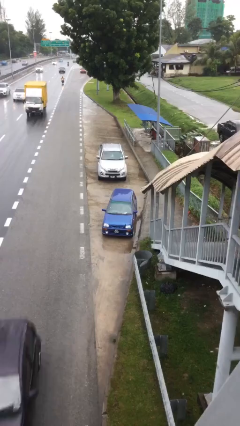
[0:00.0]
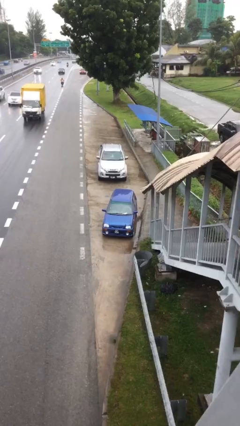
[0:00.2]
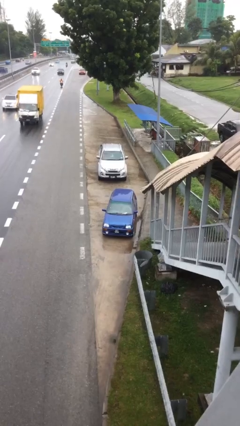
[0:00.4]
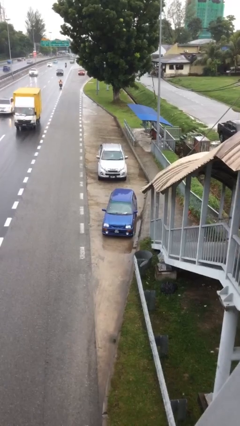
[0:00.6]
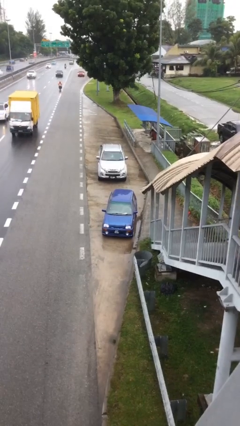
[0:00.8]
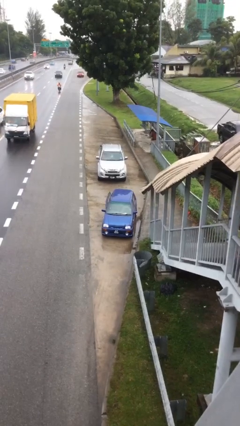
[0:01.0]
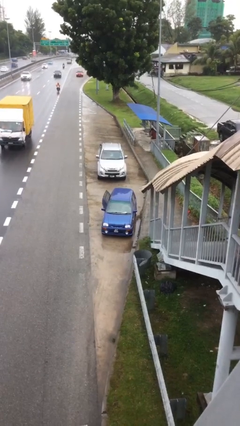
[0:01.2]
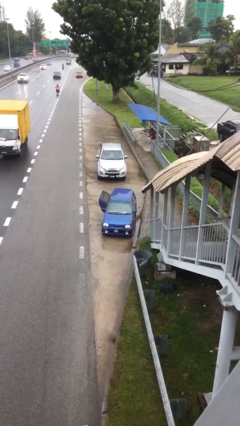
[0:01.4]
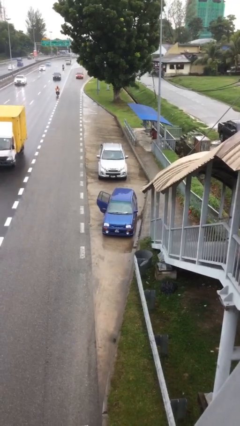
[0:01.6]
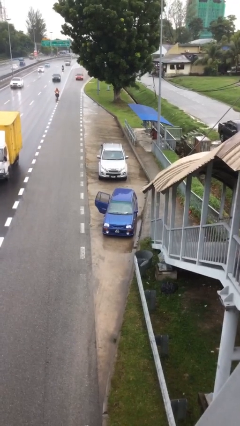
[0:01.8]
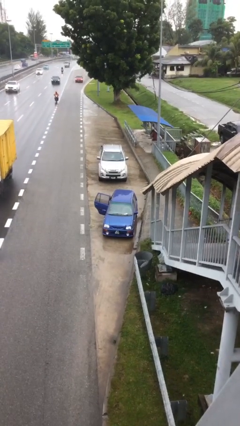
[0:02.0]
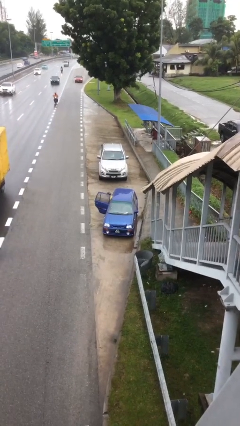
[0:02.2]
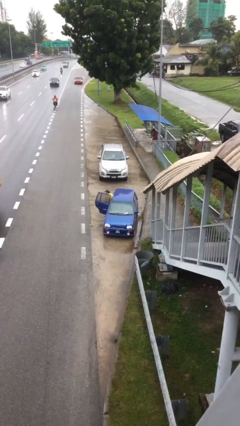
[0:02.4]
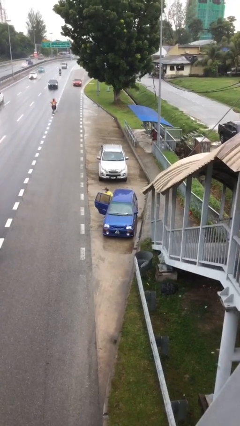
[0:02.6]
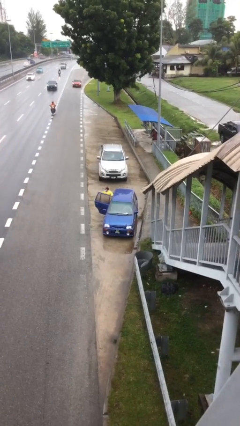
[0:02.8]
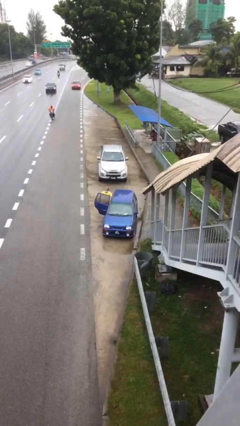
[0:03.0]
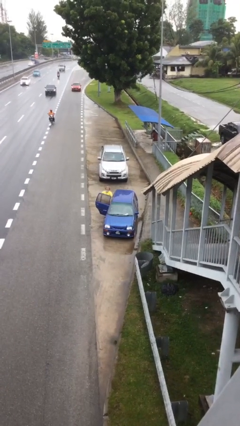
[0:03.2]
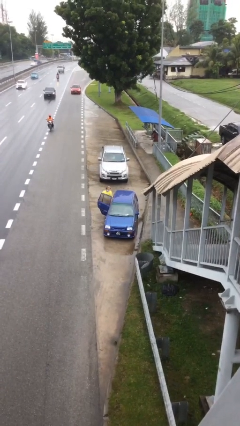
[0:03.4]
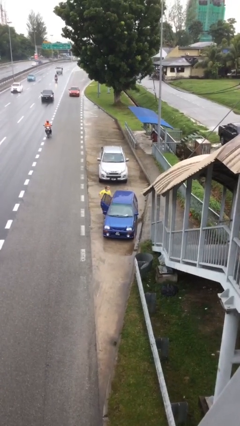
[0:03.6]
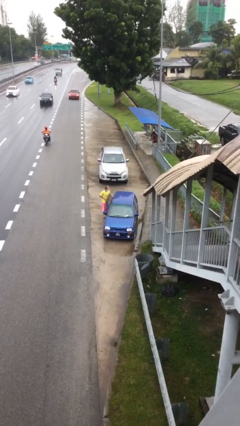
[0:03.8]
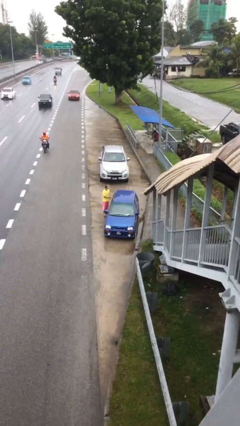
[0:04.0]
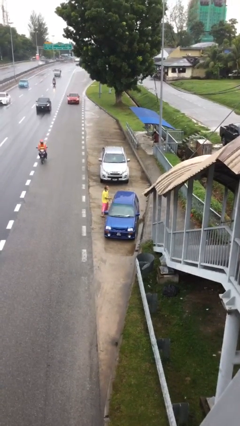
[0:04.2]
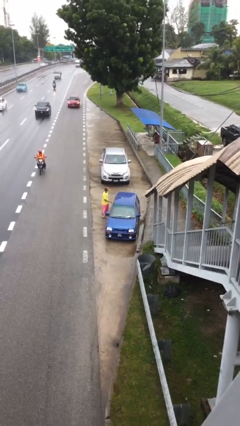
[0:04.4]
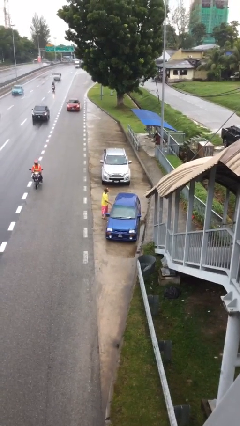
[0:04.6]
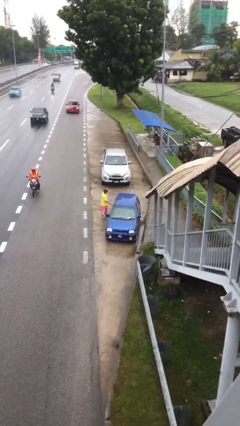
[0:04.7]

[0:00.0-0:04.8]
car drops off person

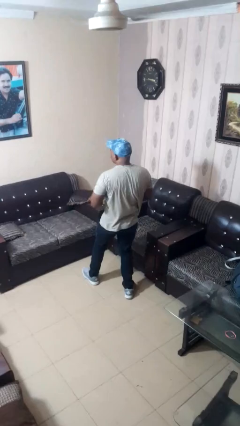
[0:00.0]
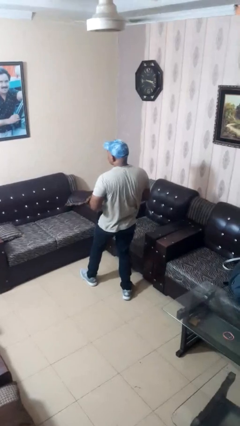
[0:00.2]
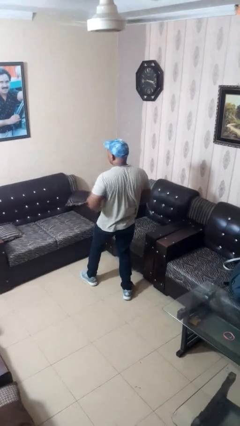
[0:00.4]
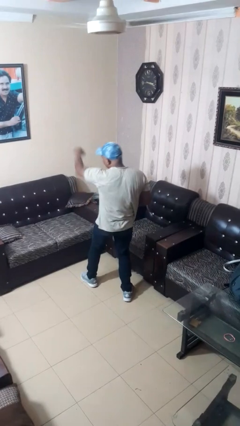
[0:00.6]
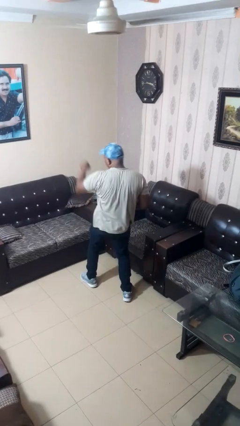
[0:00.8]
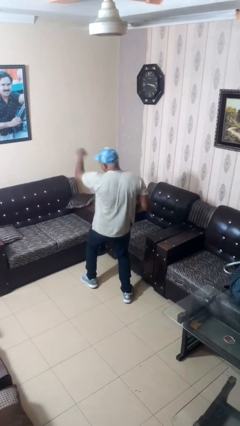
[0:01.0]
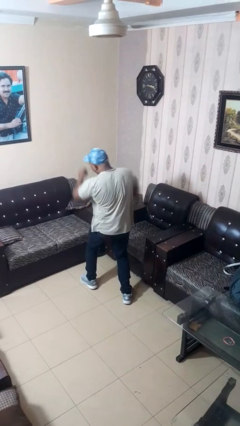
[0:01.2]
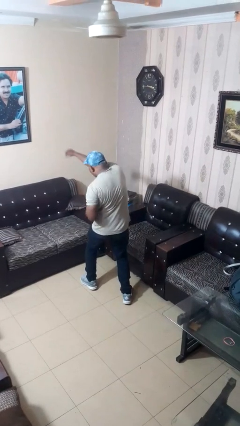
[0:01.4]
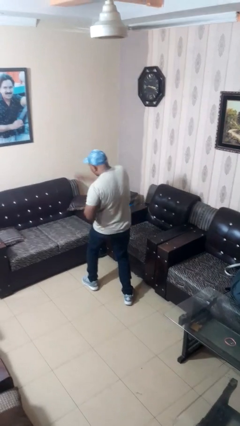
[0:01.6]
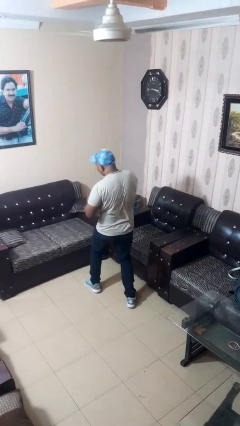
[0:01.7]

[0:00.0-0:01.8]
person punches

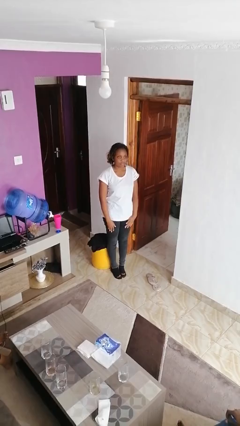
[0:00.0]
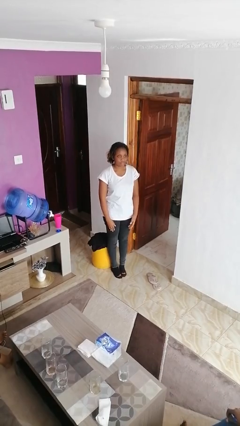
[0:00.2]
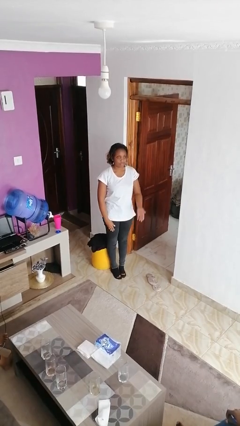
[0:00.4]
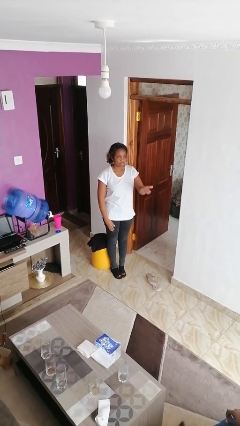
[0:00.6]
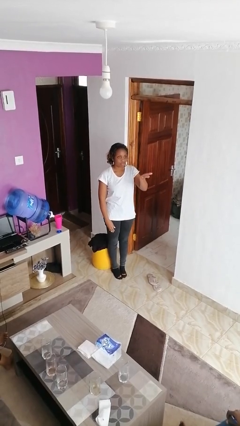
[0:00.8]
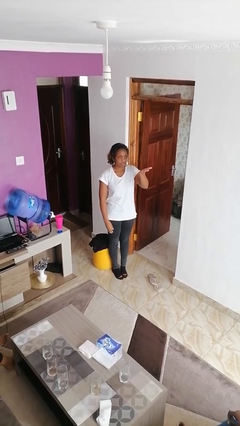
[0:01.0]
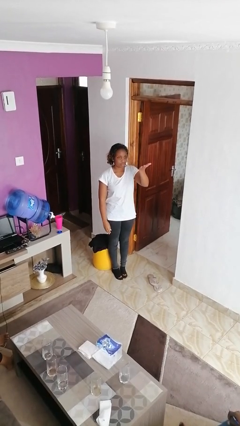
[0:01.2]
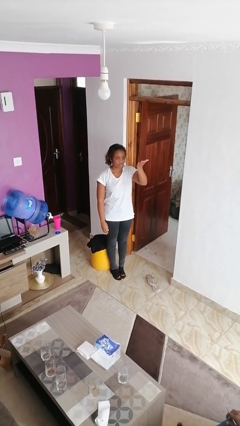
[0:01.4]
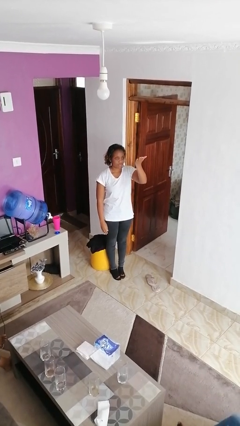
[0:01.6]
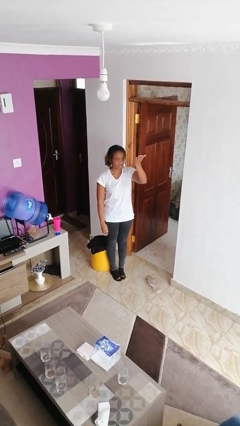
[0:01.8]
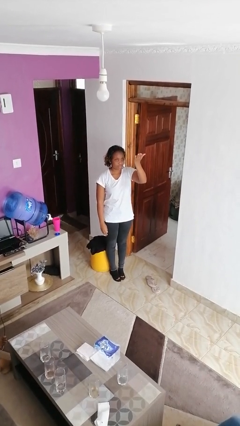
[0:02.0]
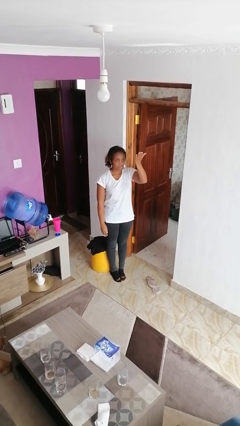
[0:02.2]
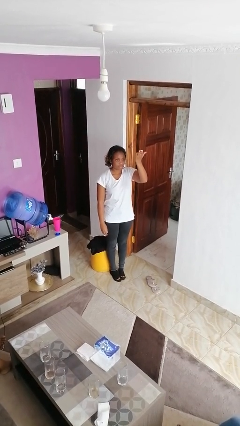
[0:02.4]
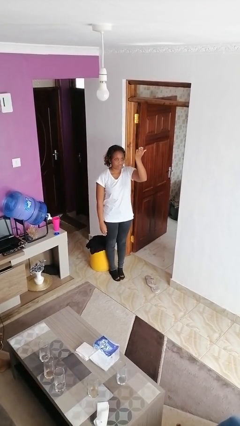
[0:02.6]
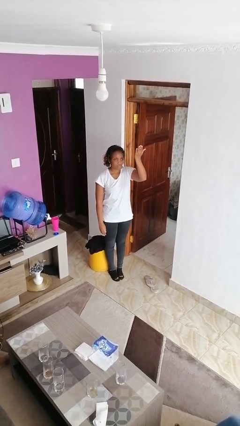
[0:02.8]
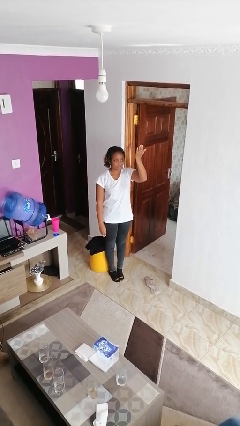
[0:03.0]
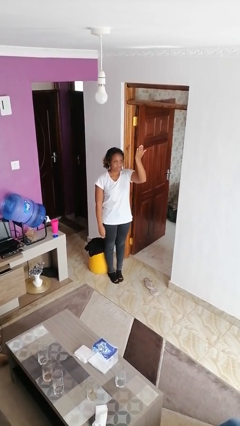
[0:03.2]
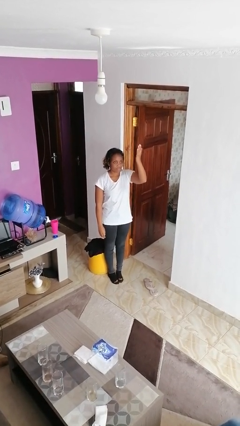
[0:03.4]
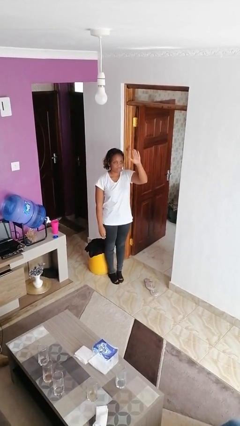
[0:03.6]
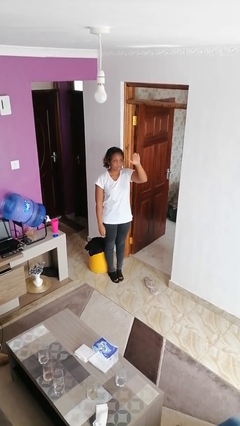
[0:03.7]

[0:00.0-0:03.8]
person gestures swipe up

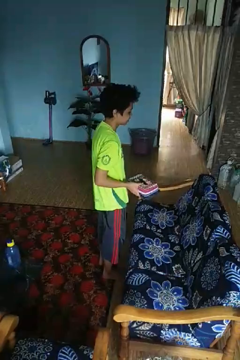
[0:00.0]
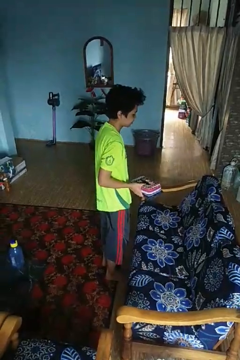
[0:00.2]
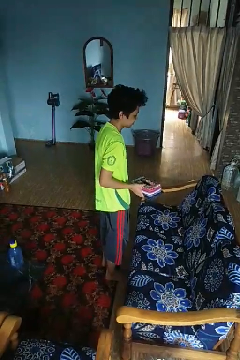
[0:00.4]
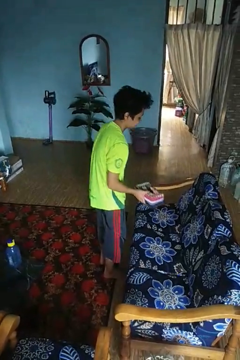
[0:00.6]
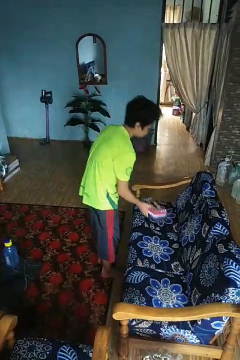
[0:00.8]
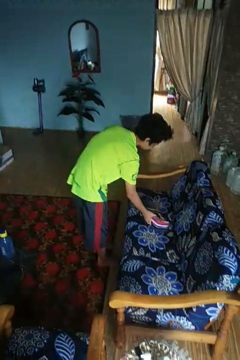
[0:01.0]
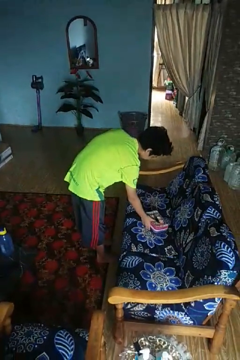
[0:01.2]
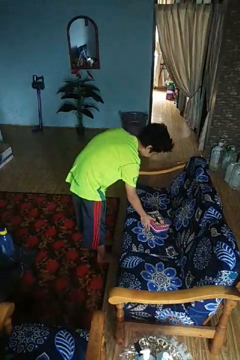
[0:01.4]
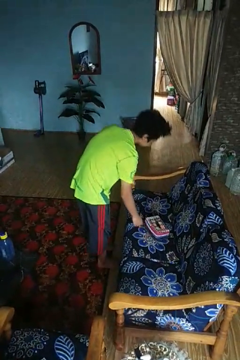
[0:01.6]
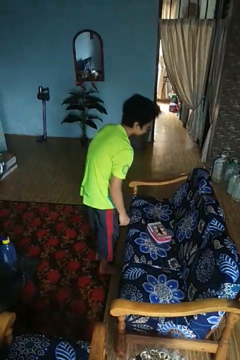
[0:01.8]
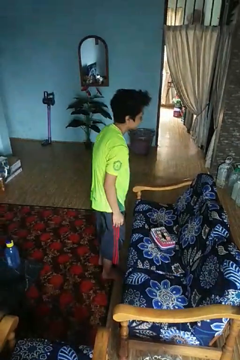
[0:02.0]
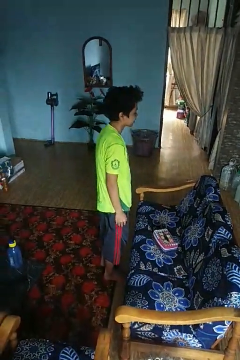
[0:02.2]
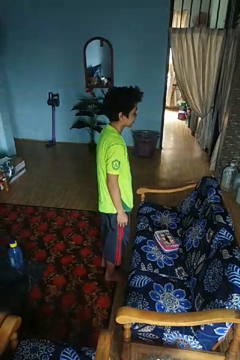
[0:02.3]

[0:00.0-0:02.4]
person puts down object on couch

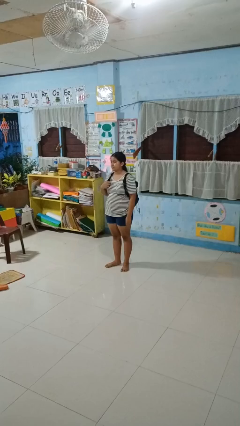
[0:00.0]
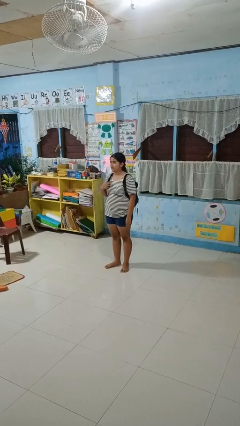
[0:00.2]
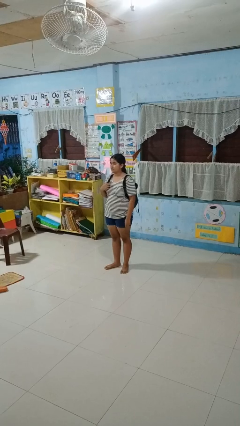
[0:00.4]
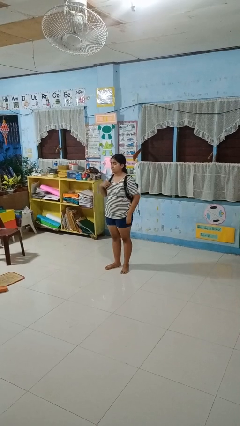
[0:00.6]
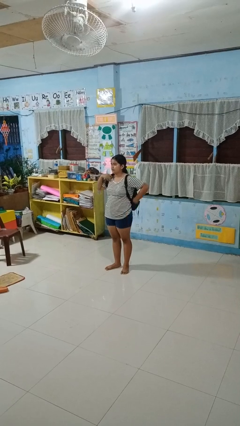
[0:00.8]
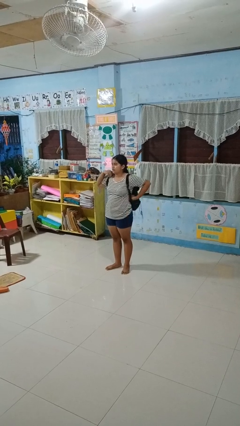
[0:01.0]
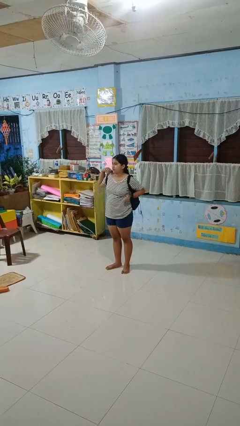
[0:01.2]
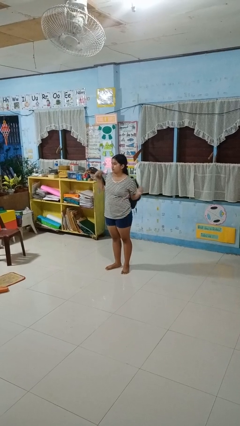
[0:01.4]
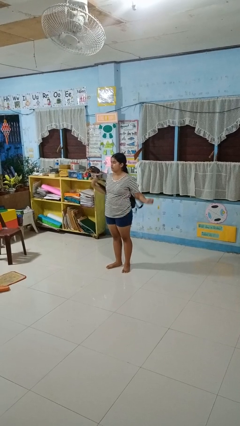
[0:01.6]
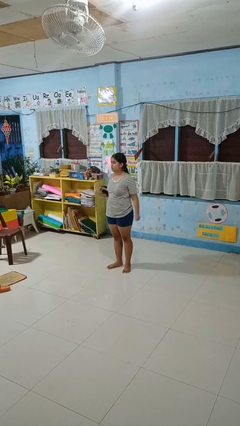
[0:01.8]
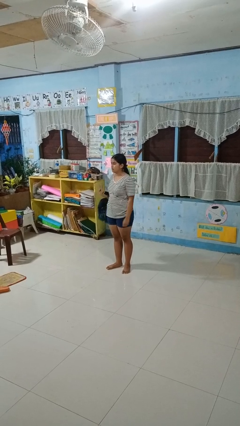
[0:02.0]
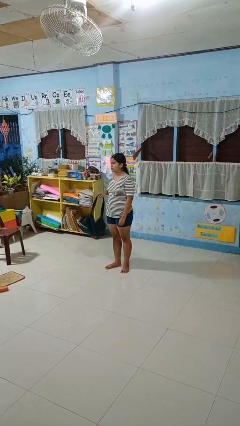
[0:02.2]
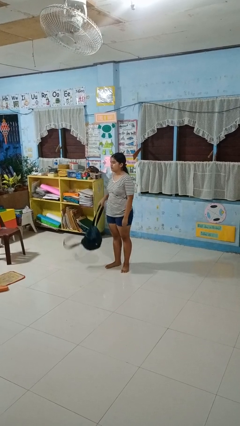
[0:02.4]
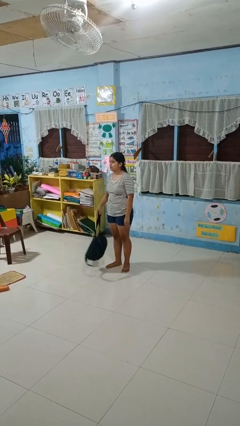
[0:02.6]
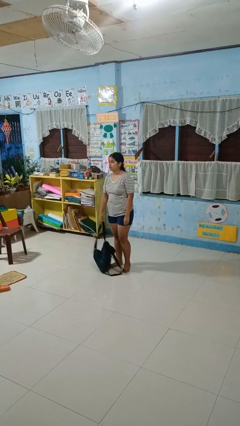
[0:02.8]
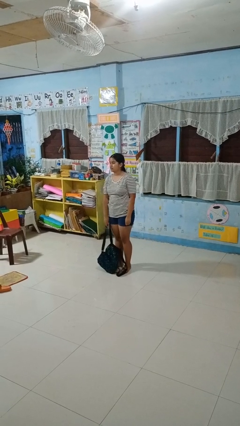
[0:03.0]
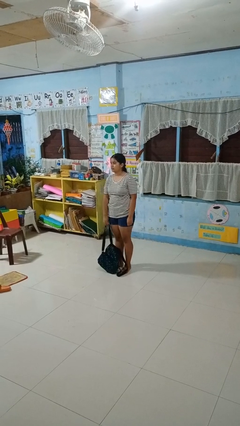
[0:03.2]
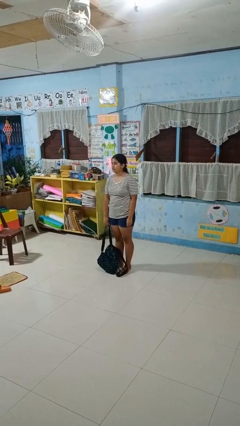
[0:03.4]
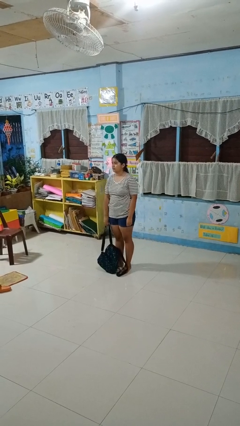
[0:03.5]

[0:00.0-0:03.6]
person takes off backpack

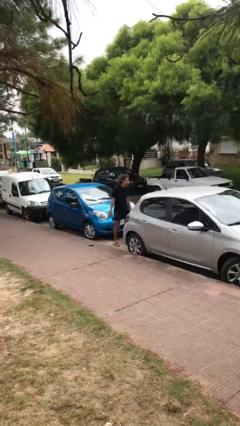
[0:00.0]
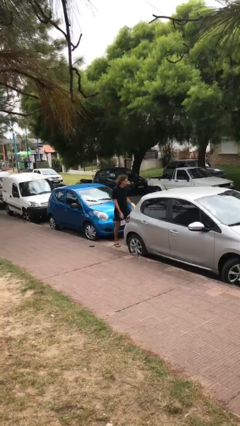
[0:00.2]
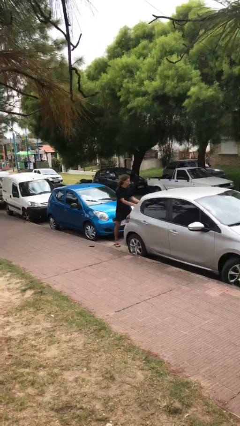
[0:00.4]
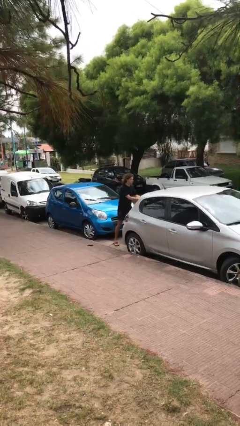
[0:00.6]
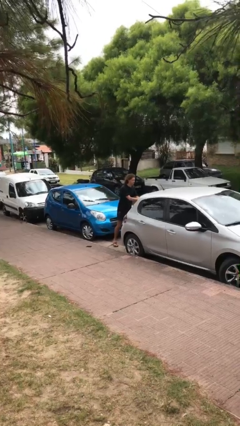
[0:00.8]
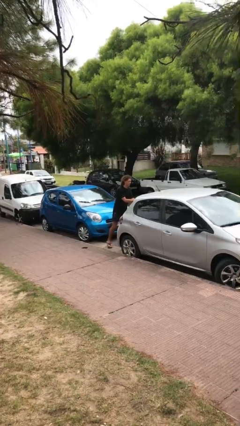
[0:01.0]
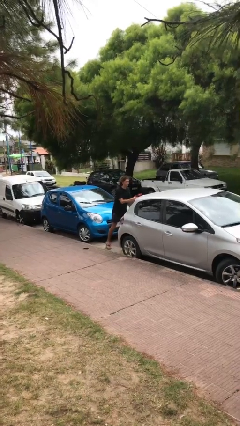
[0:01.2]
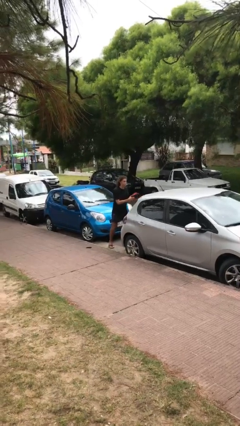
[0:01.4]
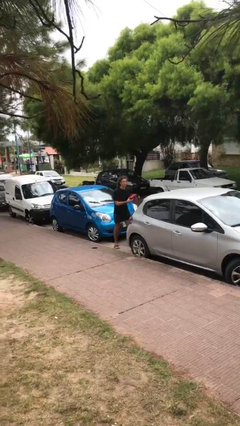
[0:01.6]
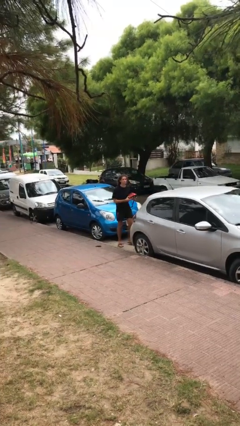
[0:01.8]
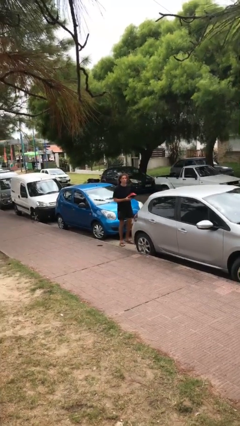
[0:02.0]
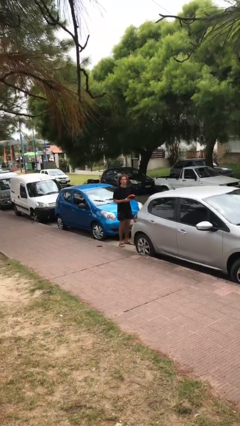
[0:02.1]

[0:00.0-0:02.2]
person unloads car
